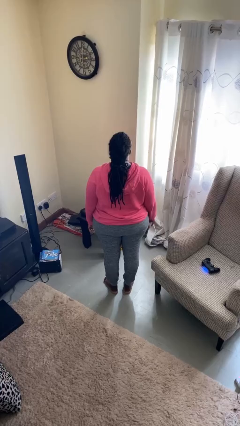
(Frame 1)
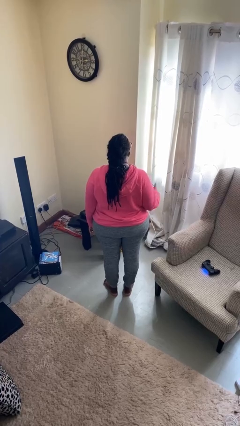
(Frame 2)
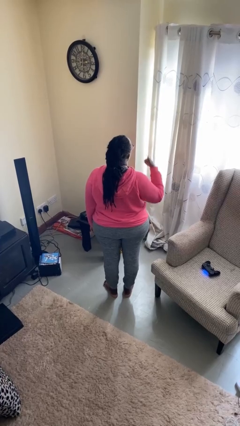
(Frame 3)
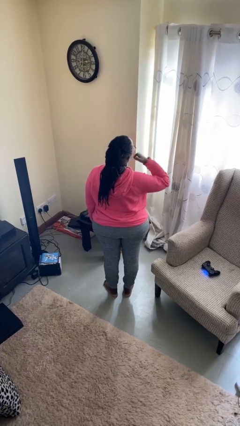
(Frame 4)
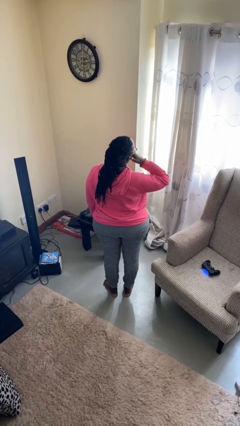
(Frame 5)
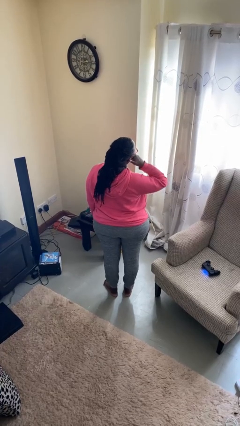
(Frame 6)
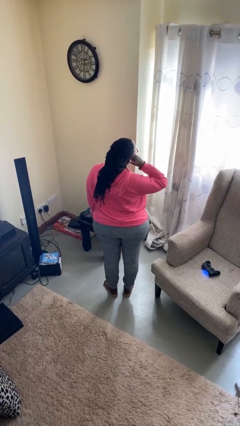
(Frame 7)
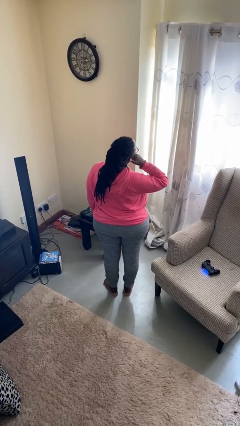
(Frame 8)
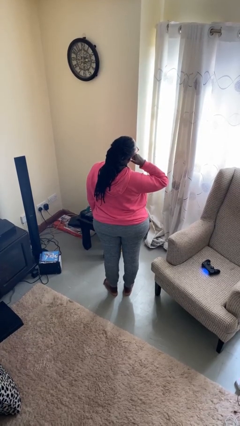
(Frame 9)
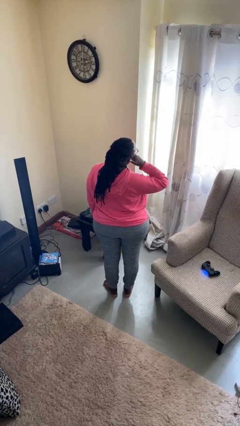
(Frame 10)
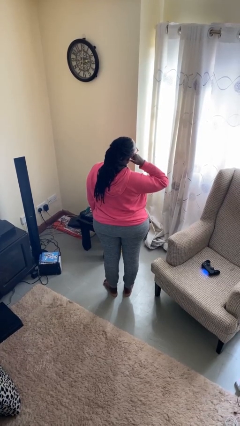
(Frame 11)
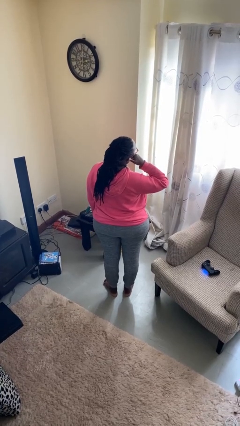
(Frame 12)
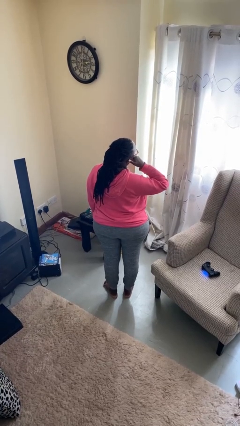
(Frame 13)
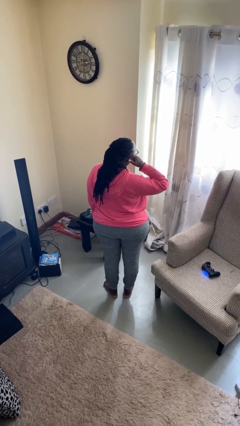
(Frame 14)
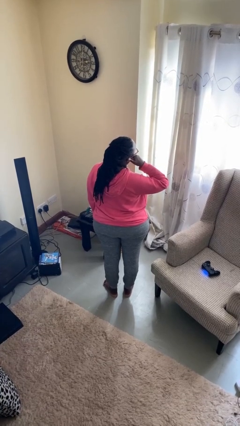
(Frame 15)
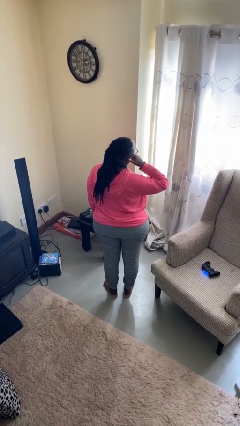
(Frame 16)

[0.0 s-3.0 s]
person gestures call me

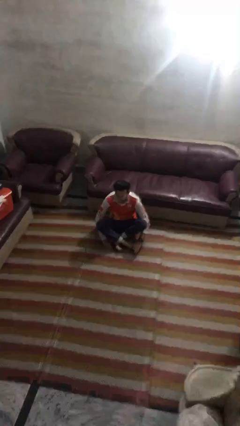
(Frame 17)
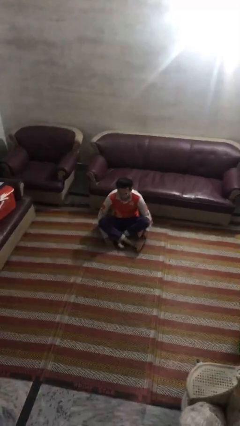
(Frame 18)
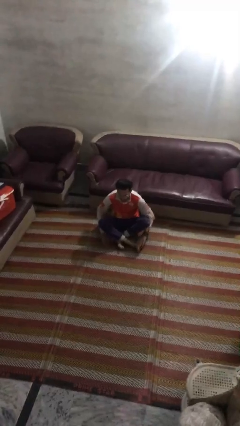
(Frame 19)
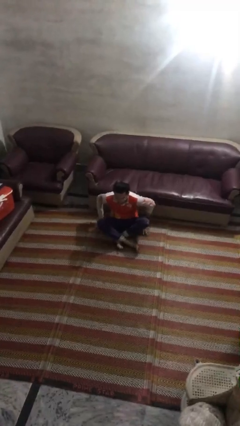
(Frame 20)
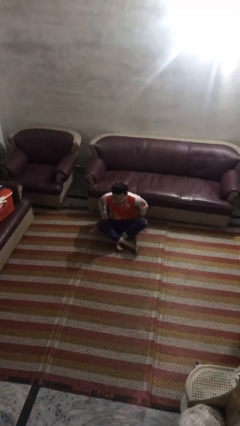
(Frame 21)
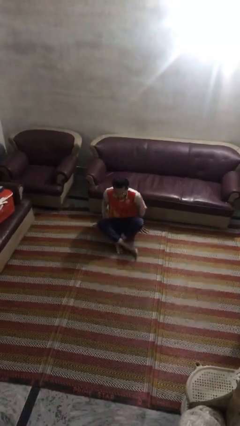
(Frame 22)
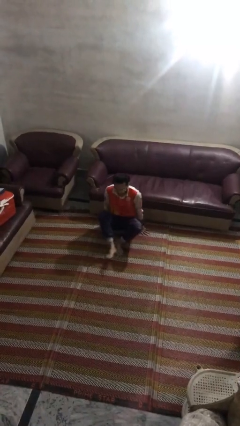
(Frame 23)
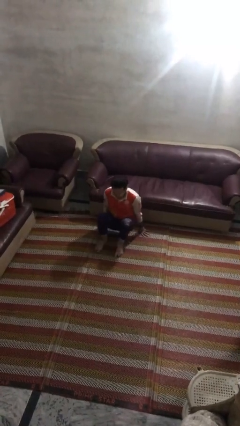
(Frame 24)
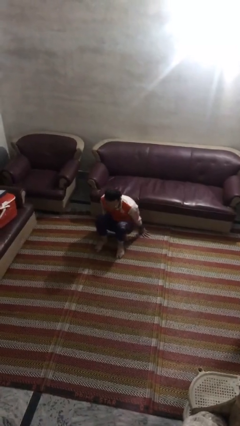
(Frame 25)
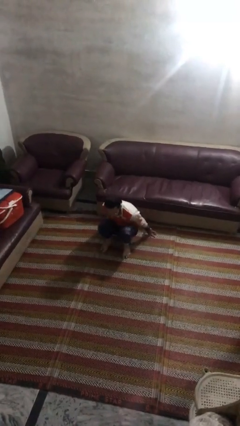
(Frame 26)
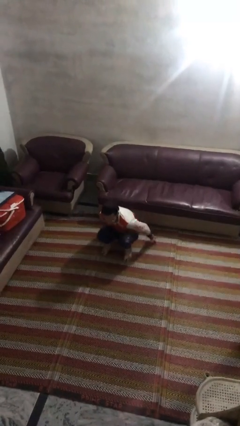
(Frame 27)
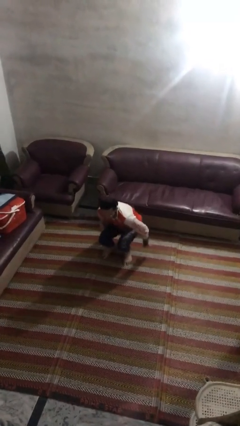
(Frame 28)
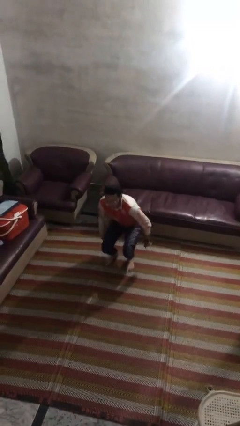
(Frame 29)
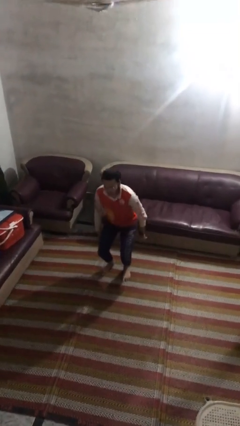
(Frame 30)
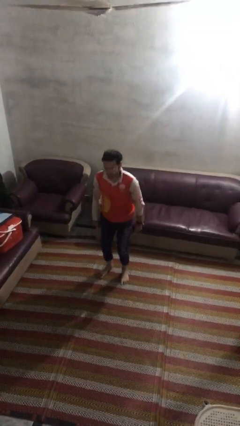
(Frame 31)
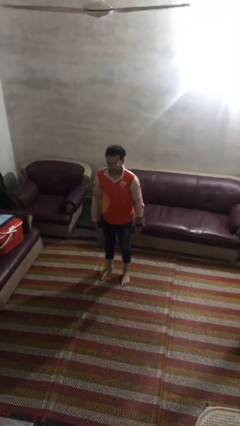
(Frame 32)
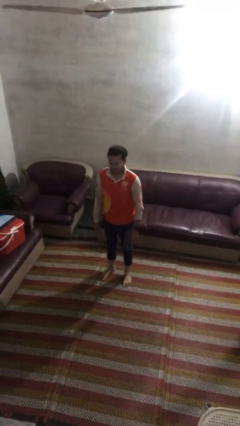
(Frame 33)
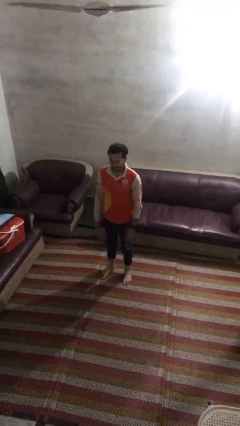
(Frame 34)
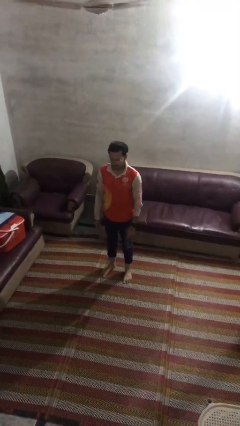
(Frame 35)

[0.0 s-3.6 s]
person stands up from floor

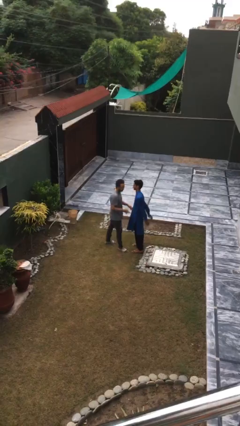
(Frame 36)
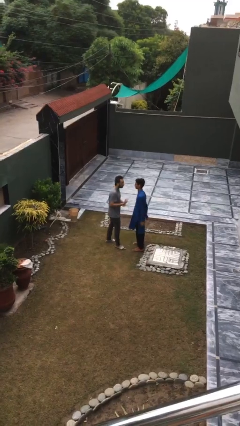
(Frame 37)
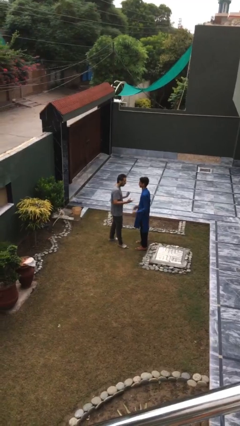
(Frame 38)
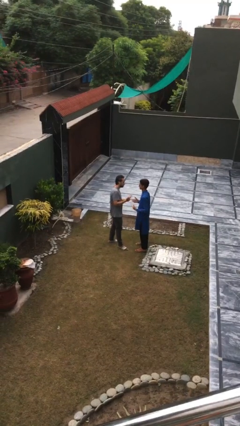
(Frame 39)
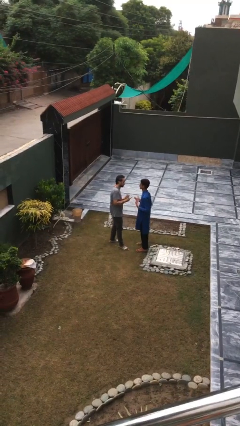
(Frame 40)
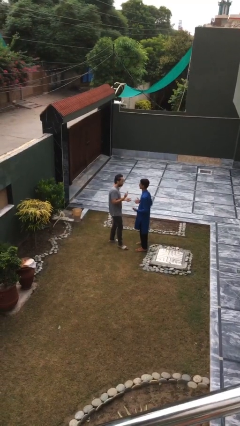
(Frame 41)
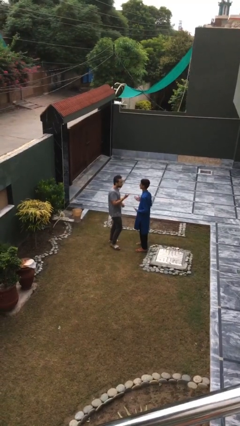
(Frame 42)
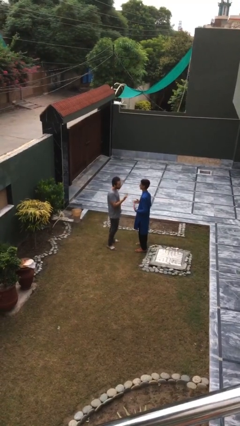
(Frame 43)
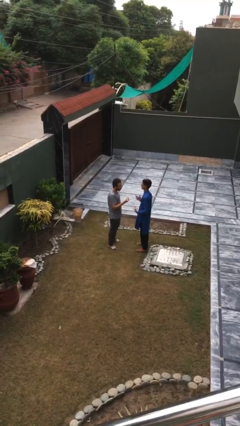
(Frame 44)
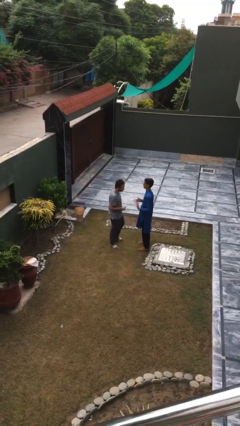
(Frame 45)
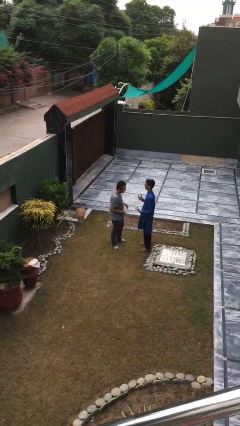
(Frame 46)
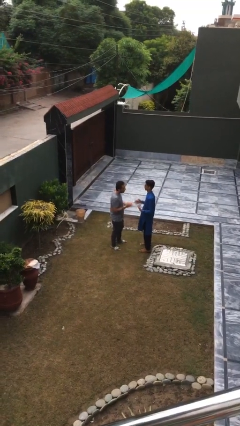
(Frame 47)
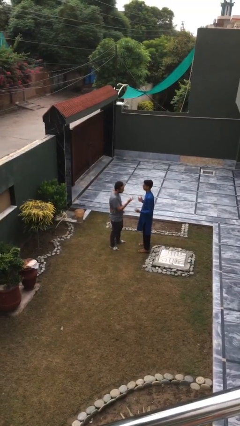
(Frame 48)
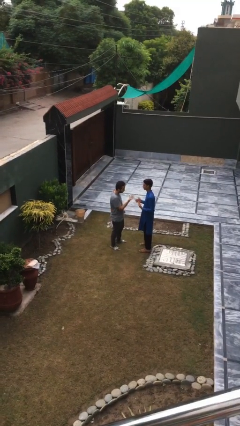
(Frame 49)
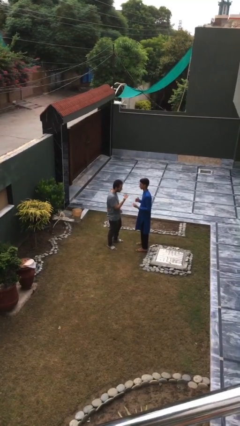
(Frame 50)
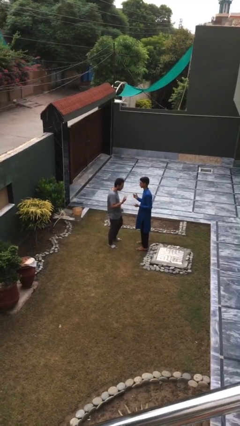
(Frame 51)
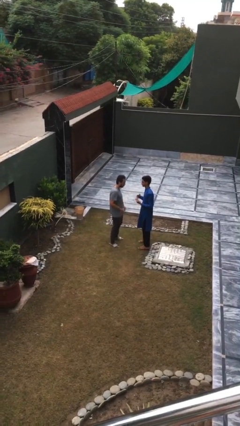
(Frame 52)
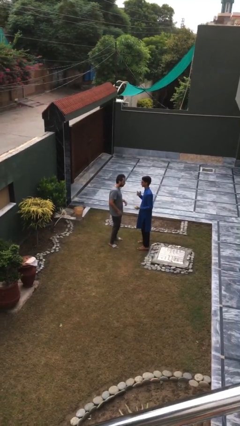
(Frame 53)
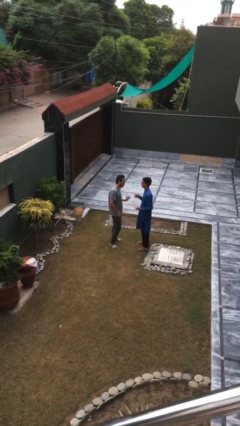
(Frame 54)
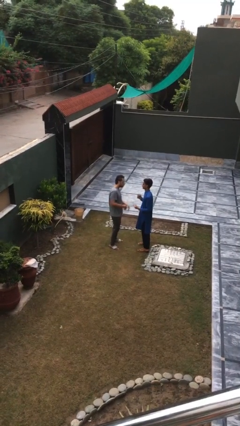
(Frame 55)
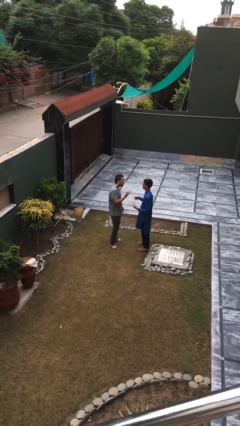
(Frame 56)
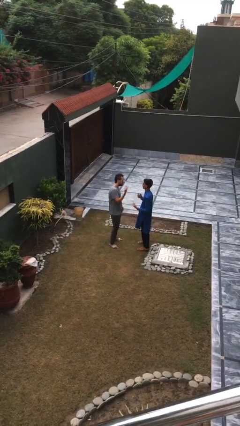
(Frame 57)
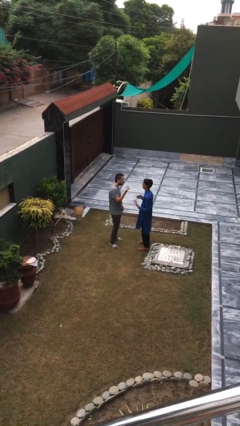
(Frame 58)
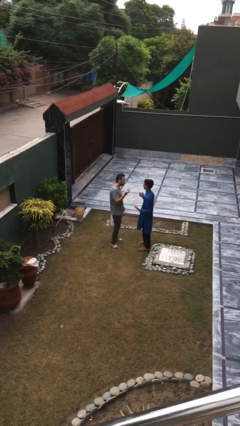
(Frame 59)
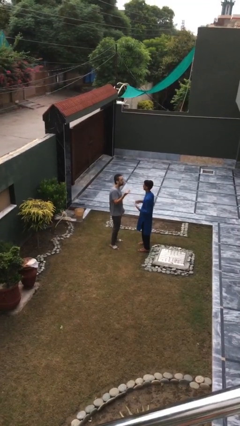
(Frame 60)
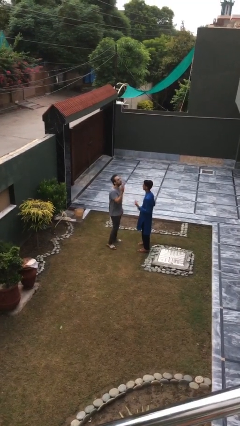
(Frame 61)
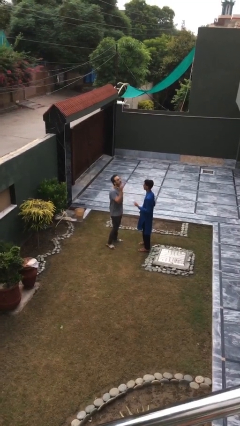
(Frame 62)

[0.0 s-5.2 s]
person talks to person

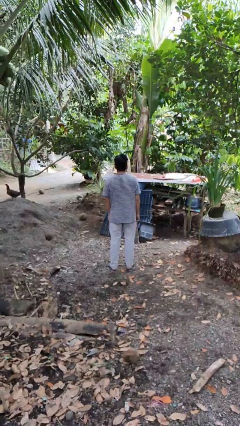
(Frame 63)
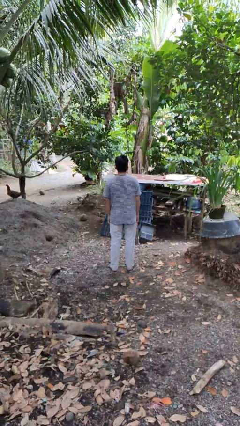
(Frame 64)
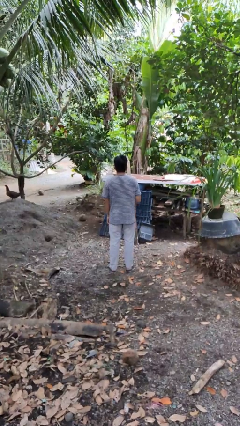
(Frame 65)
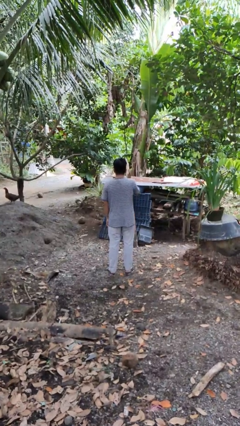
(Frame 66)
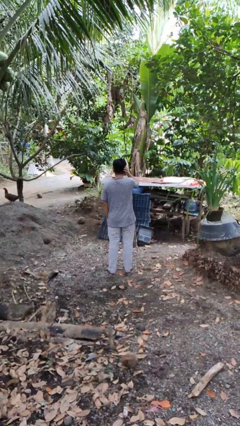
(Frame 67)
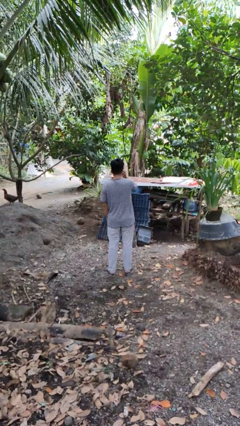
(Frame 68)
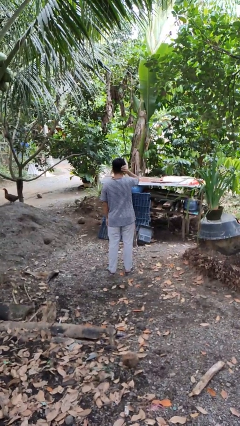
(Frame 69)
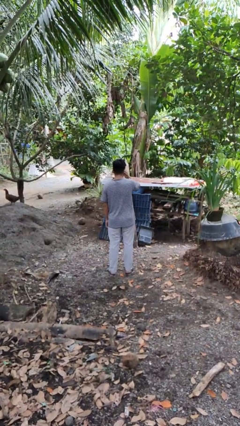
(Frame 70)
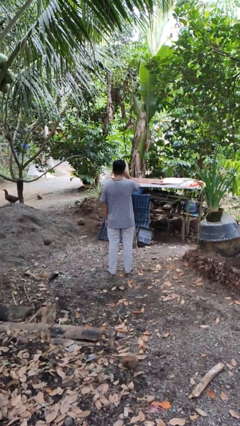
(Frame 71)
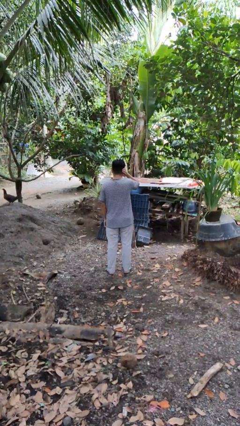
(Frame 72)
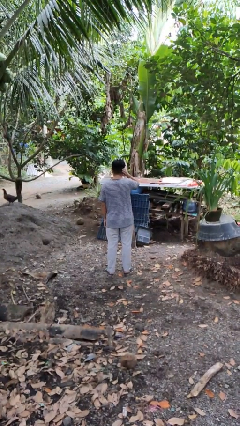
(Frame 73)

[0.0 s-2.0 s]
person scratches face

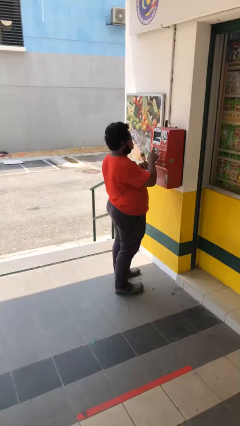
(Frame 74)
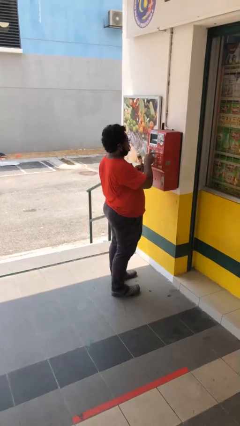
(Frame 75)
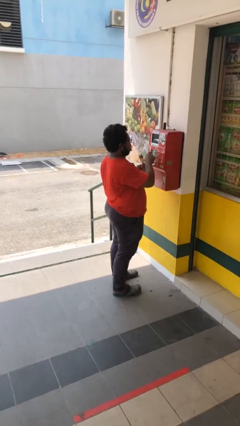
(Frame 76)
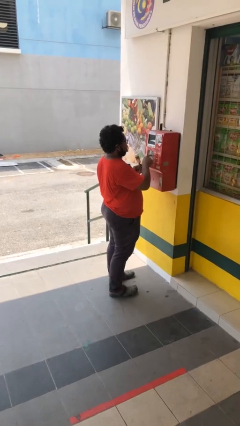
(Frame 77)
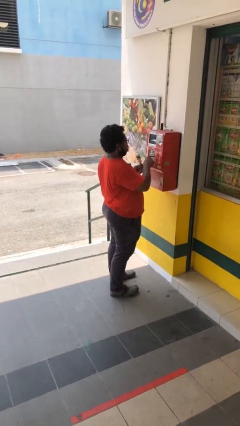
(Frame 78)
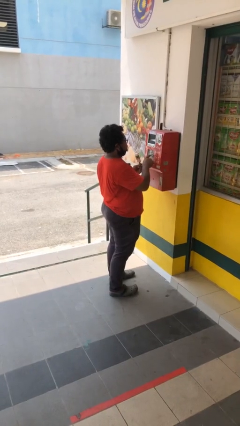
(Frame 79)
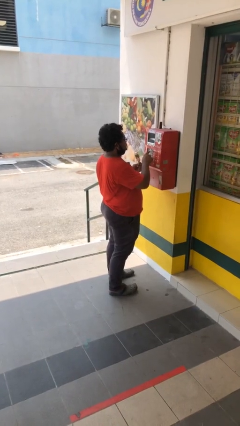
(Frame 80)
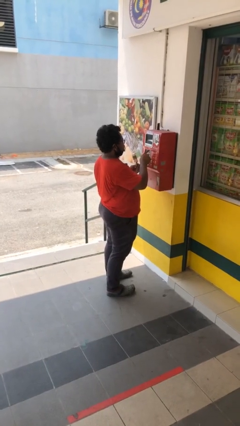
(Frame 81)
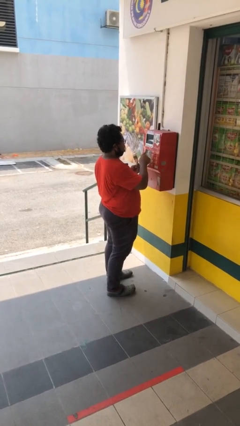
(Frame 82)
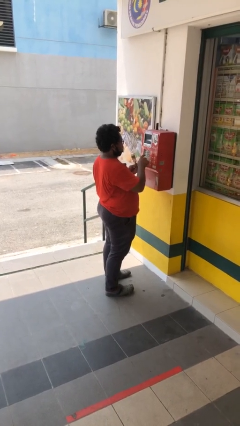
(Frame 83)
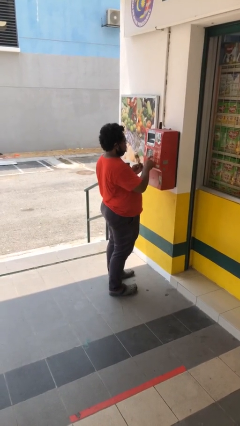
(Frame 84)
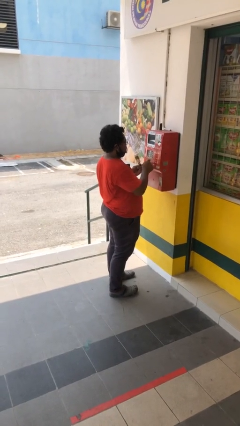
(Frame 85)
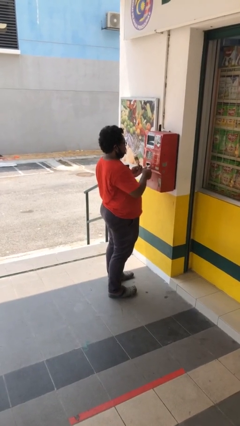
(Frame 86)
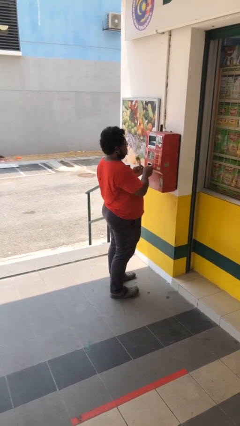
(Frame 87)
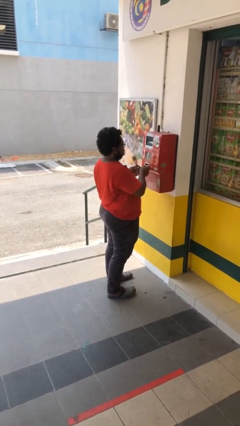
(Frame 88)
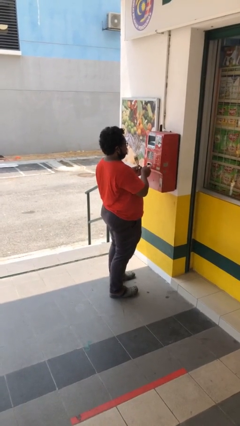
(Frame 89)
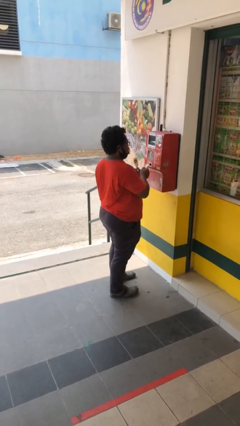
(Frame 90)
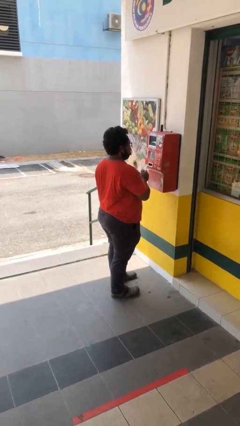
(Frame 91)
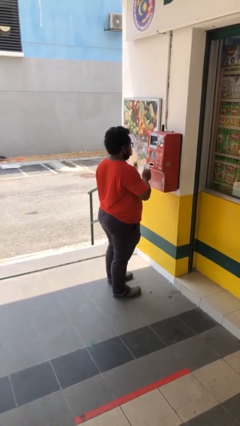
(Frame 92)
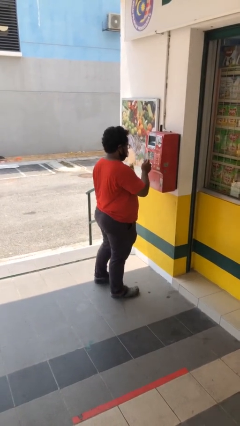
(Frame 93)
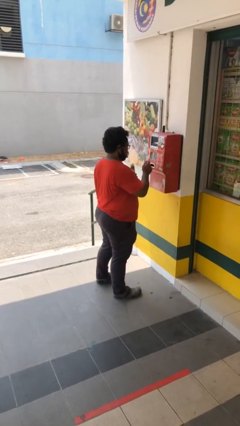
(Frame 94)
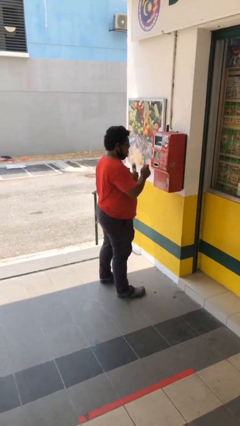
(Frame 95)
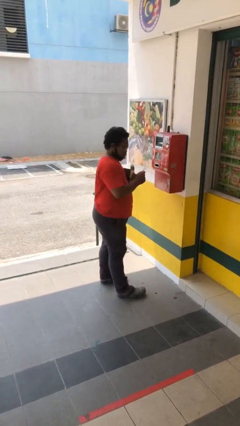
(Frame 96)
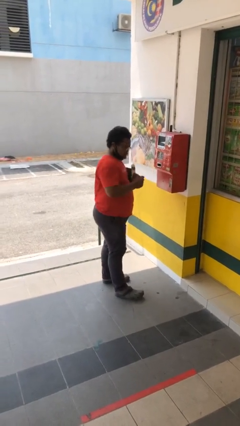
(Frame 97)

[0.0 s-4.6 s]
person purchases from machine
